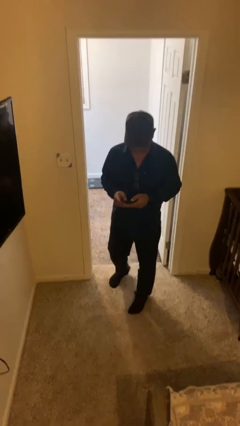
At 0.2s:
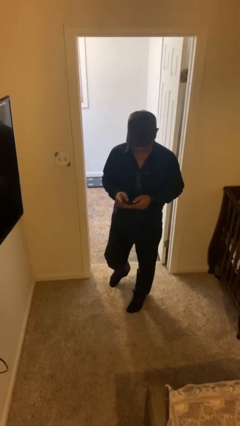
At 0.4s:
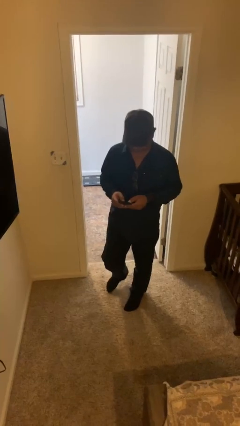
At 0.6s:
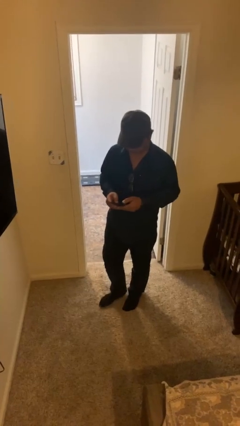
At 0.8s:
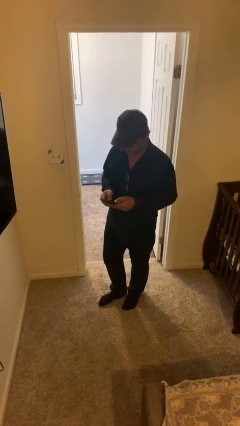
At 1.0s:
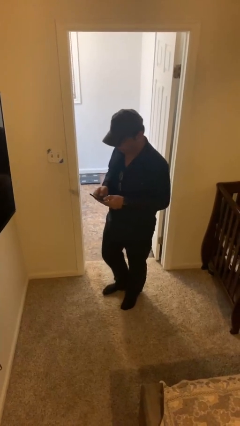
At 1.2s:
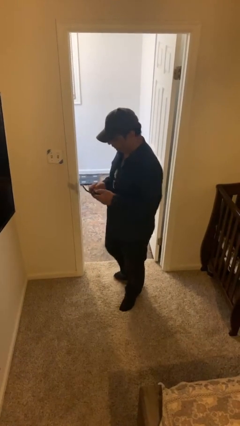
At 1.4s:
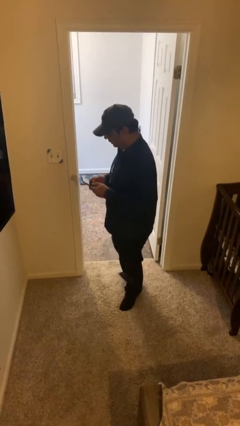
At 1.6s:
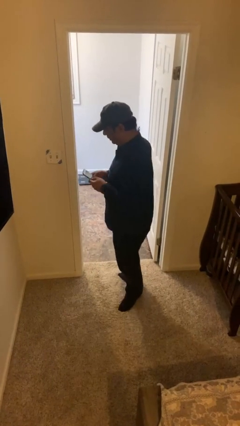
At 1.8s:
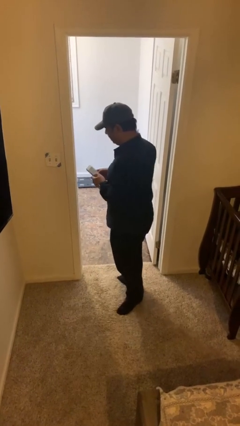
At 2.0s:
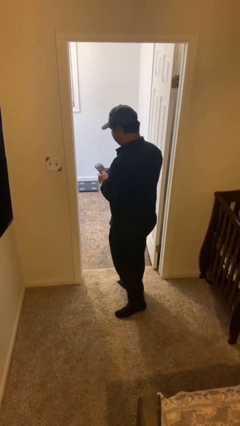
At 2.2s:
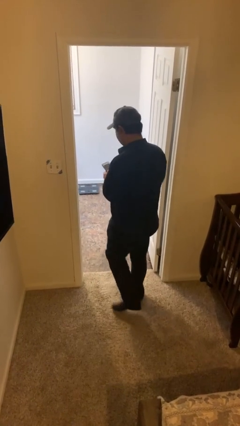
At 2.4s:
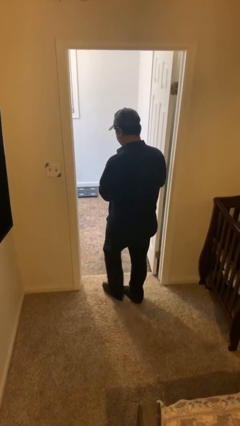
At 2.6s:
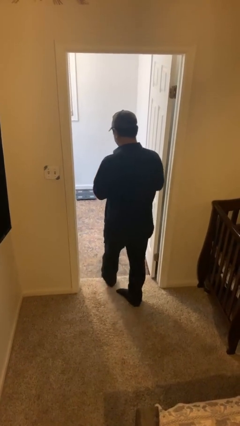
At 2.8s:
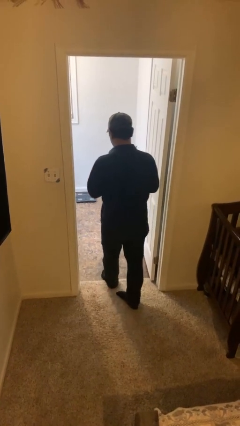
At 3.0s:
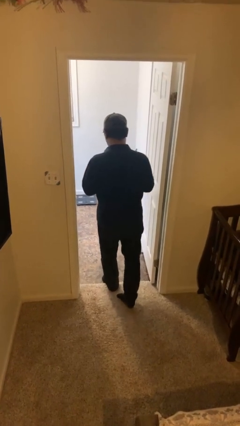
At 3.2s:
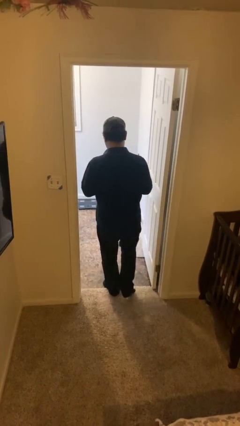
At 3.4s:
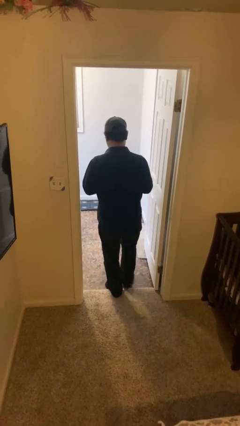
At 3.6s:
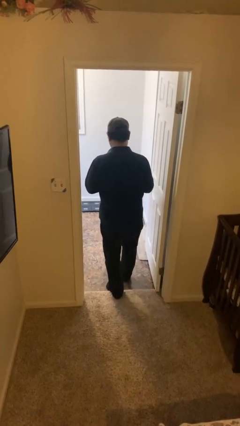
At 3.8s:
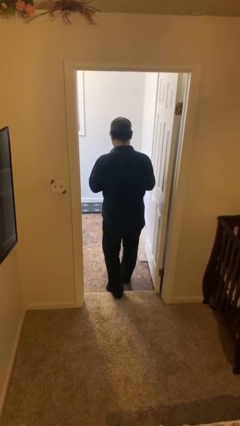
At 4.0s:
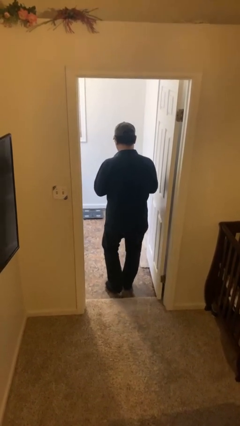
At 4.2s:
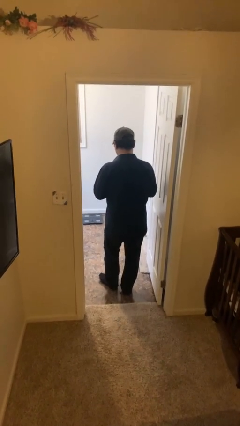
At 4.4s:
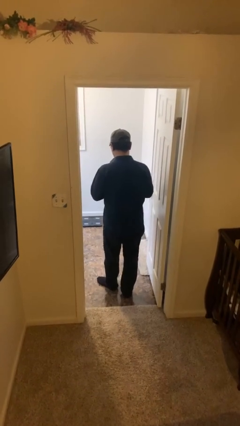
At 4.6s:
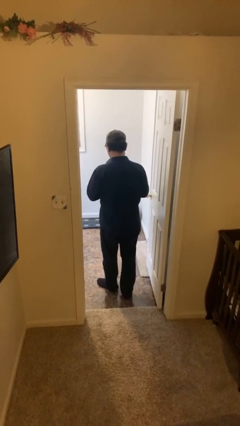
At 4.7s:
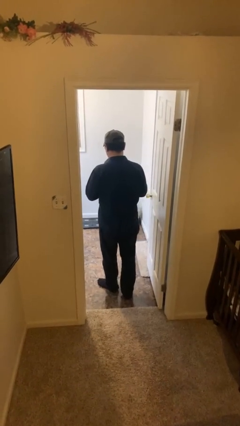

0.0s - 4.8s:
person exits scene through structure

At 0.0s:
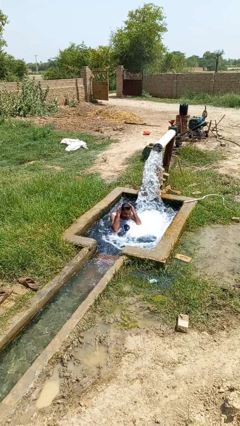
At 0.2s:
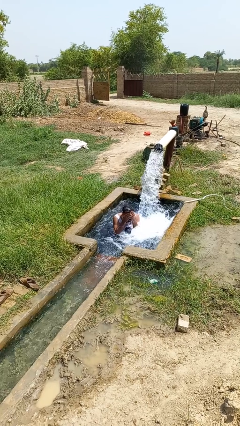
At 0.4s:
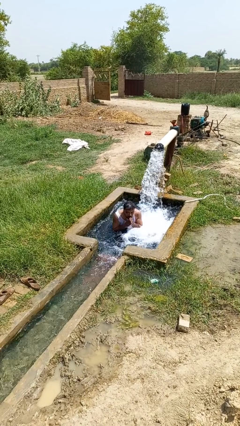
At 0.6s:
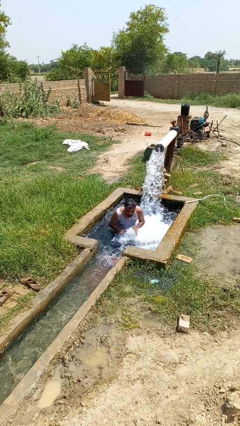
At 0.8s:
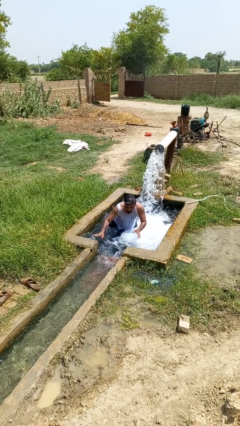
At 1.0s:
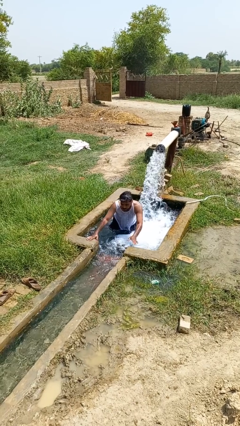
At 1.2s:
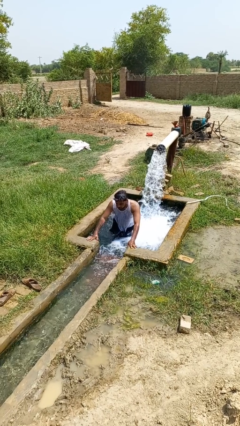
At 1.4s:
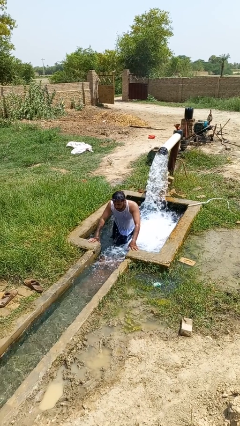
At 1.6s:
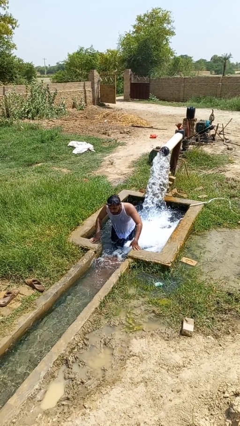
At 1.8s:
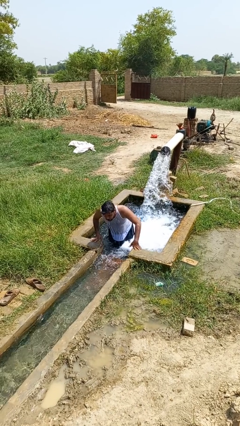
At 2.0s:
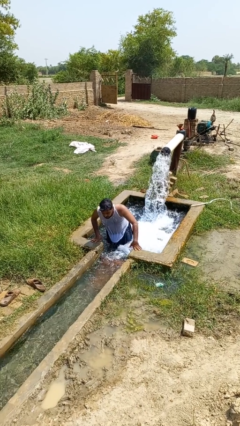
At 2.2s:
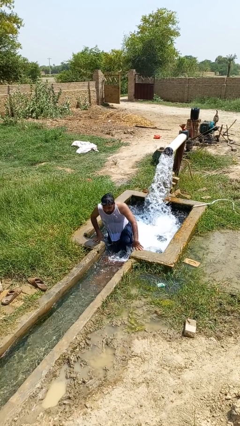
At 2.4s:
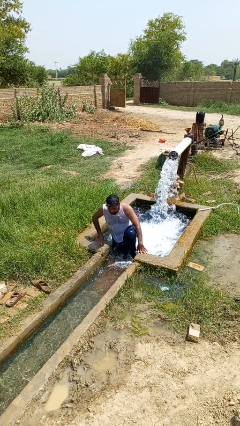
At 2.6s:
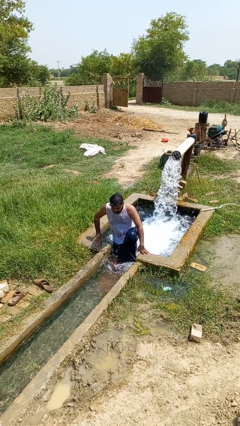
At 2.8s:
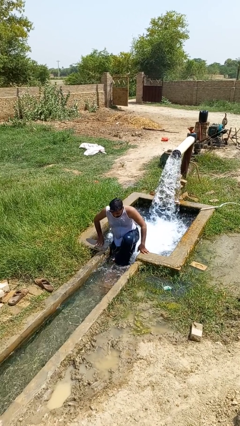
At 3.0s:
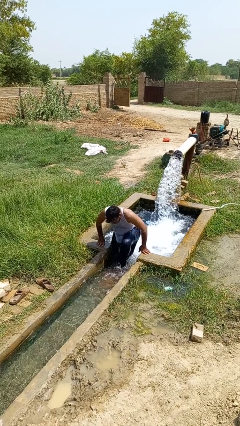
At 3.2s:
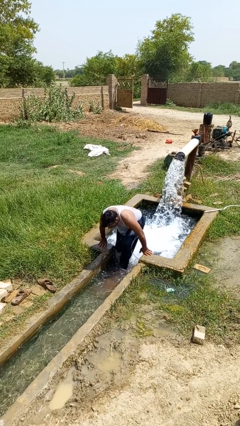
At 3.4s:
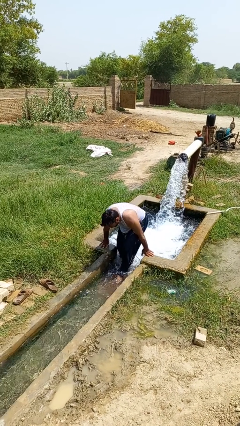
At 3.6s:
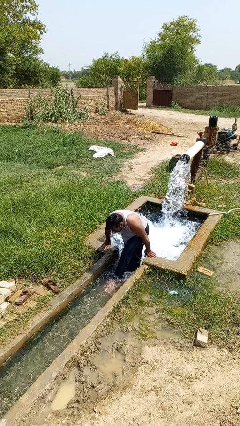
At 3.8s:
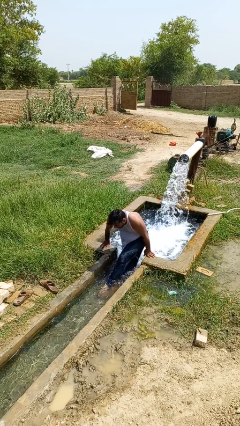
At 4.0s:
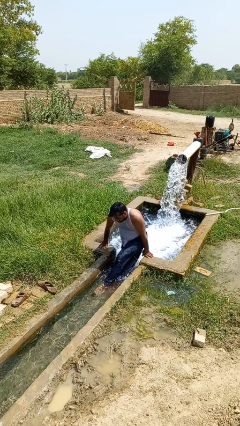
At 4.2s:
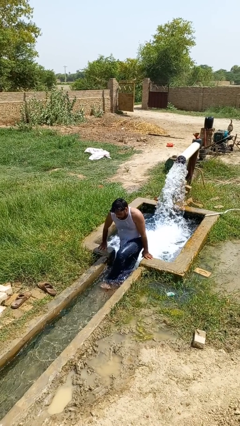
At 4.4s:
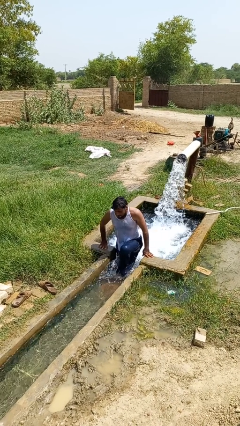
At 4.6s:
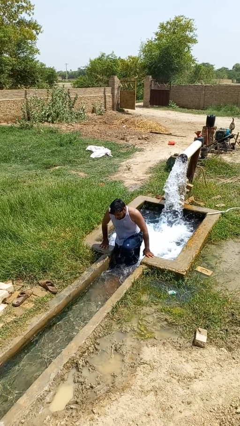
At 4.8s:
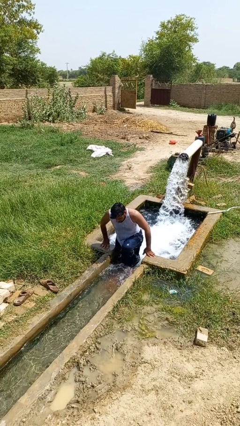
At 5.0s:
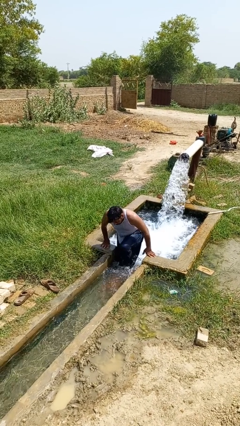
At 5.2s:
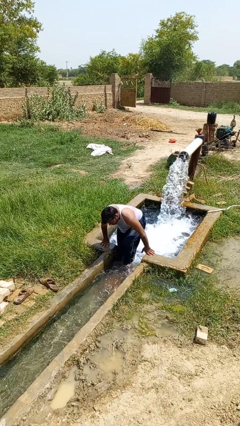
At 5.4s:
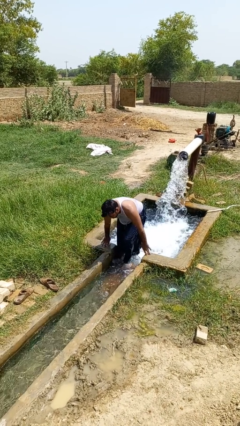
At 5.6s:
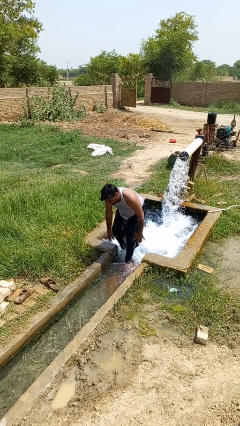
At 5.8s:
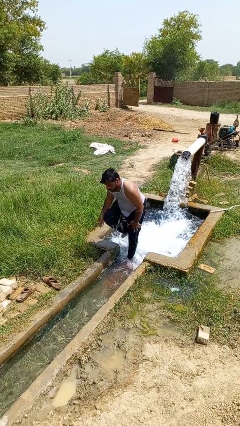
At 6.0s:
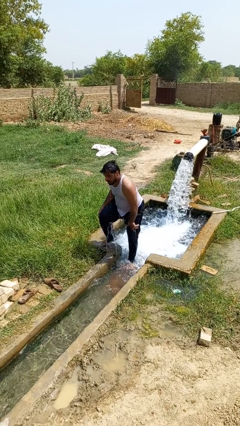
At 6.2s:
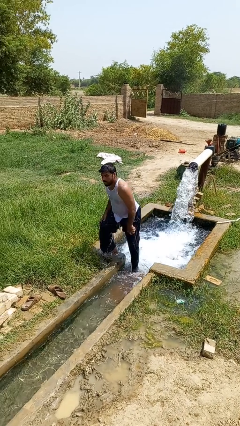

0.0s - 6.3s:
person exits pool

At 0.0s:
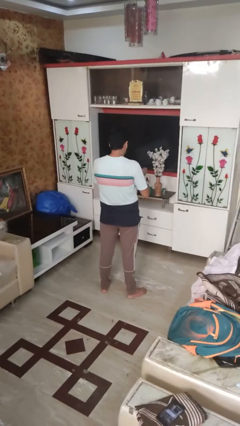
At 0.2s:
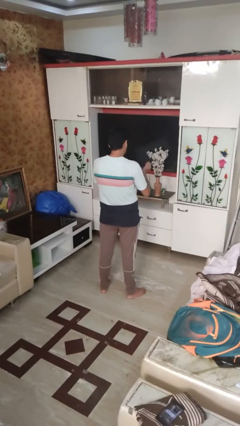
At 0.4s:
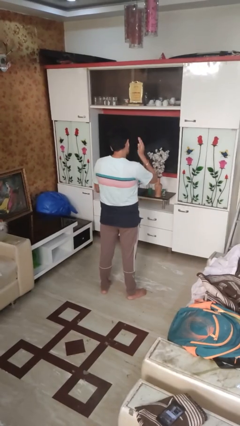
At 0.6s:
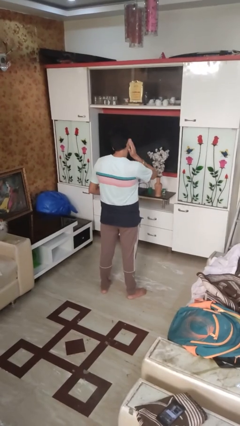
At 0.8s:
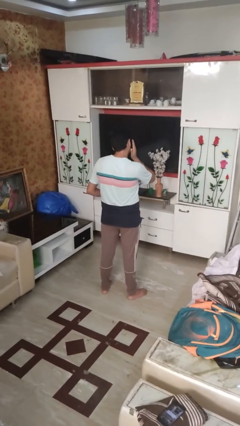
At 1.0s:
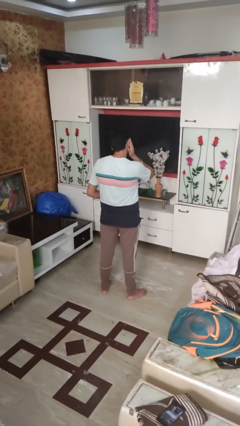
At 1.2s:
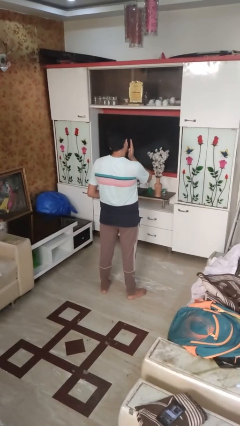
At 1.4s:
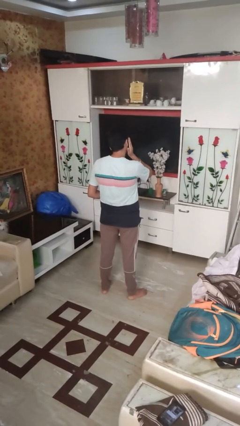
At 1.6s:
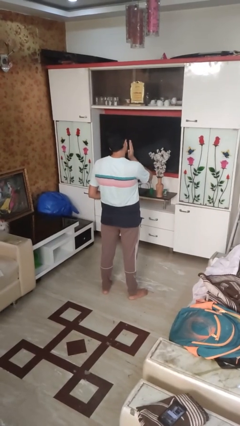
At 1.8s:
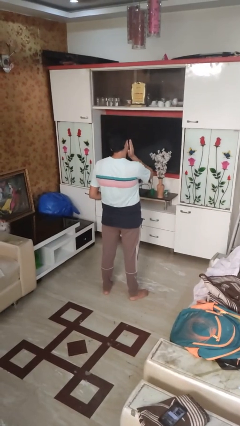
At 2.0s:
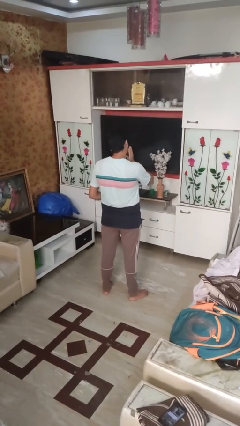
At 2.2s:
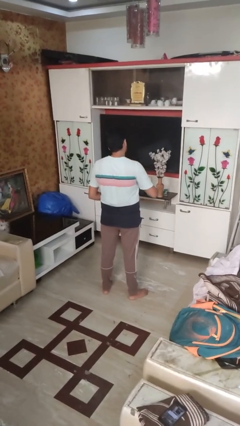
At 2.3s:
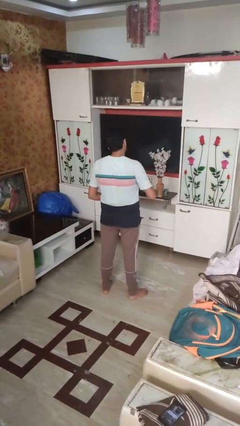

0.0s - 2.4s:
person applies shaving cream

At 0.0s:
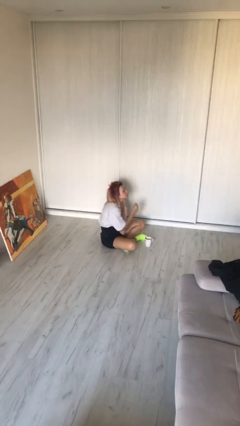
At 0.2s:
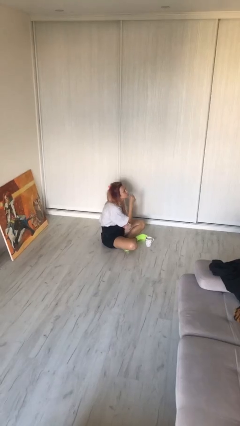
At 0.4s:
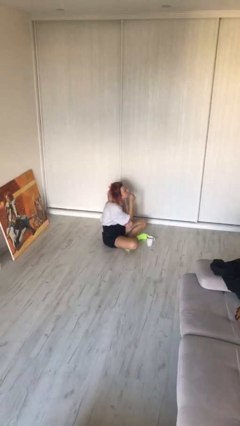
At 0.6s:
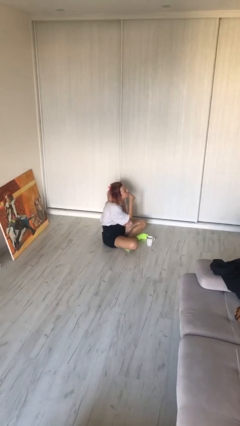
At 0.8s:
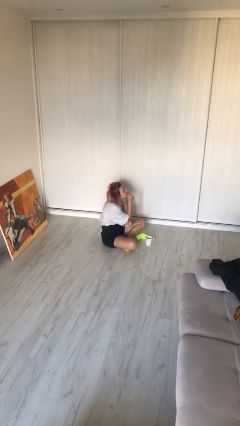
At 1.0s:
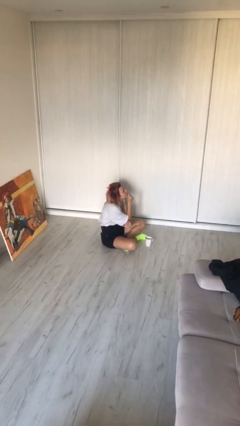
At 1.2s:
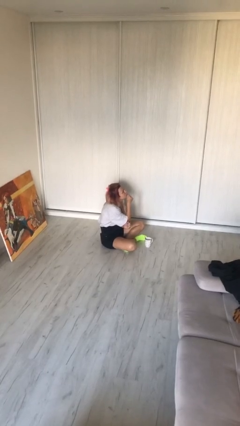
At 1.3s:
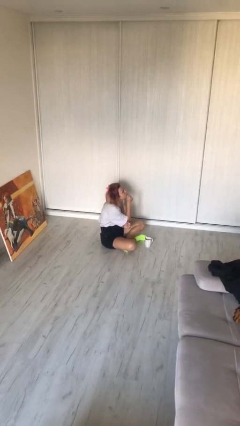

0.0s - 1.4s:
person strokes chin

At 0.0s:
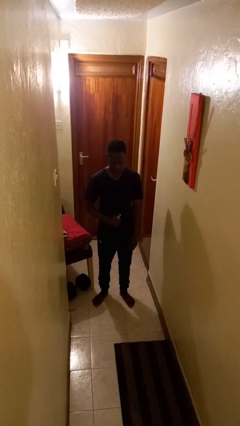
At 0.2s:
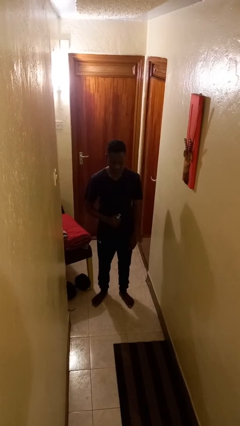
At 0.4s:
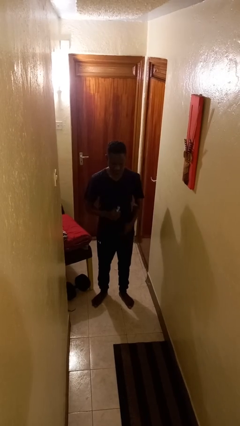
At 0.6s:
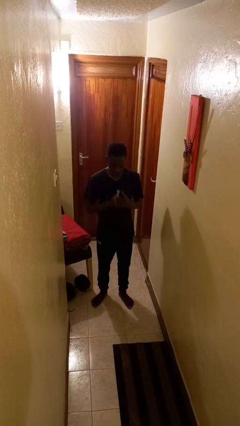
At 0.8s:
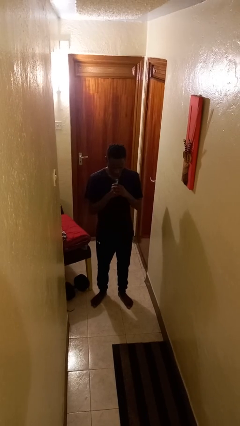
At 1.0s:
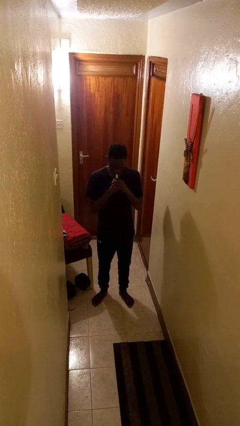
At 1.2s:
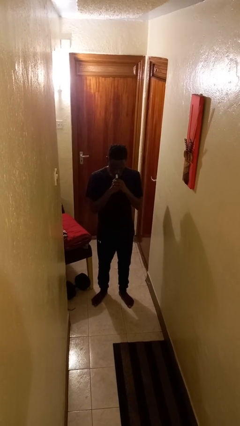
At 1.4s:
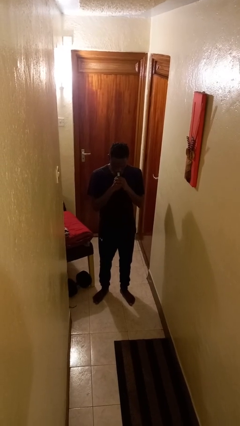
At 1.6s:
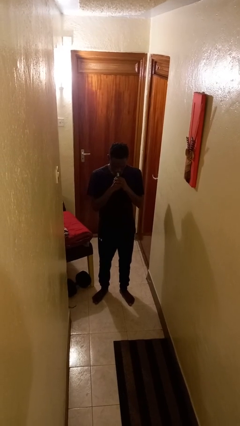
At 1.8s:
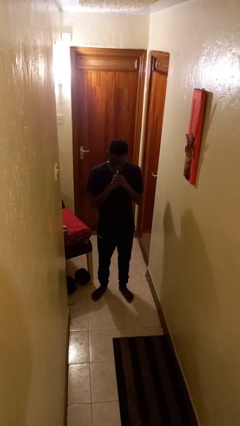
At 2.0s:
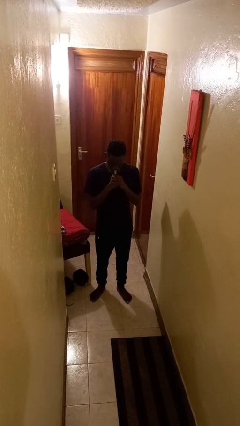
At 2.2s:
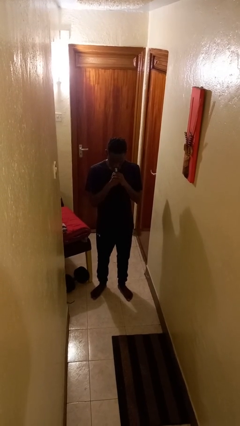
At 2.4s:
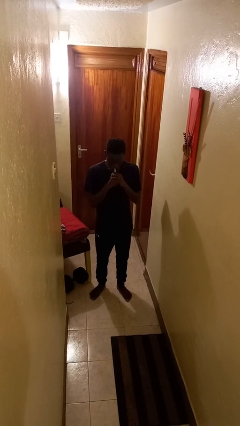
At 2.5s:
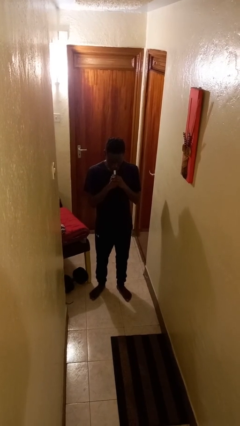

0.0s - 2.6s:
person vapes

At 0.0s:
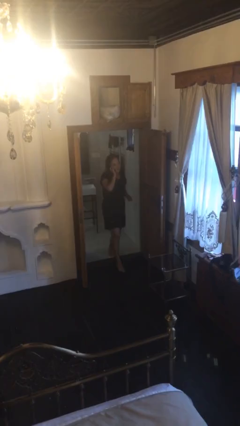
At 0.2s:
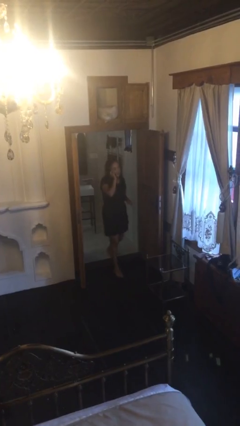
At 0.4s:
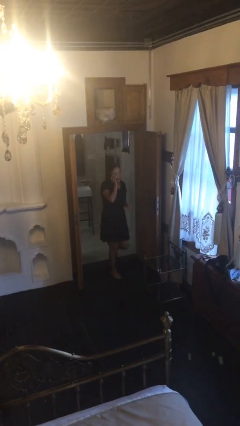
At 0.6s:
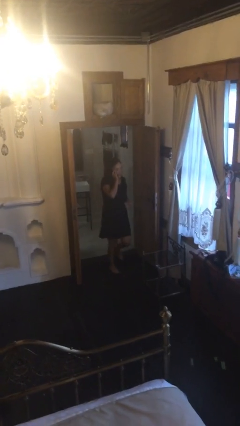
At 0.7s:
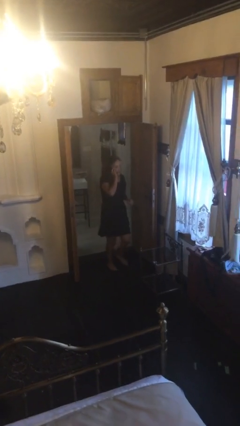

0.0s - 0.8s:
person enters scene through structure
